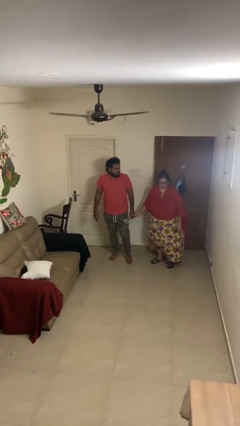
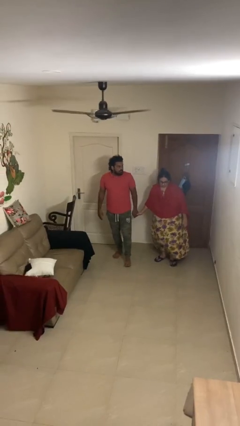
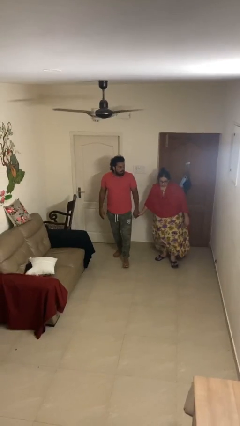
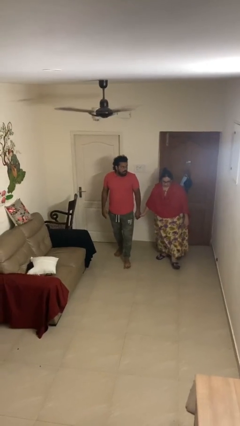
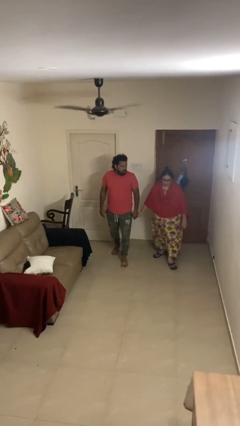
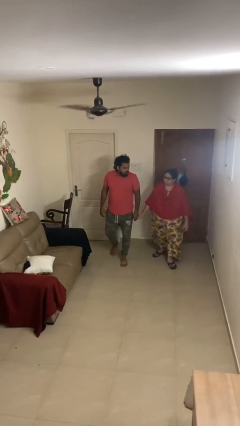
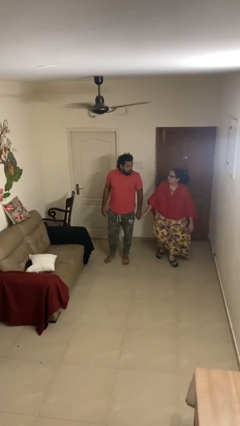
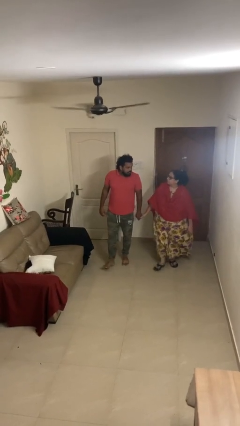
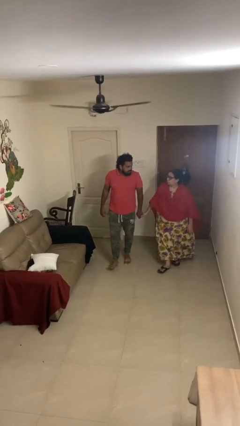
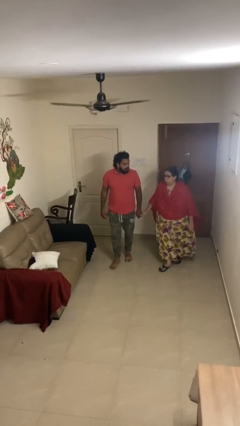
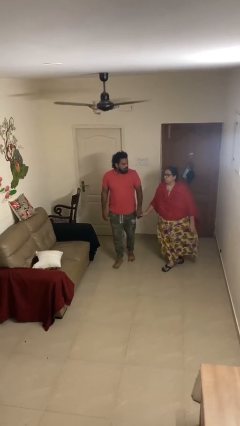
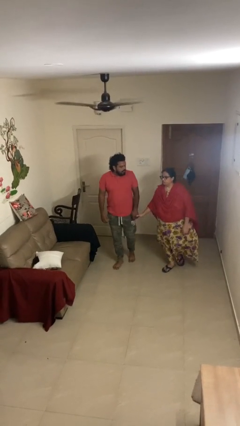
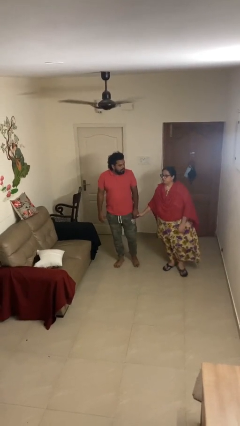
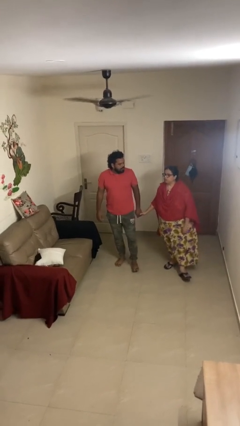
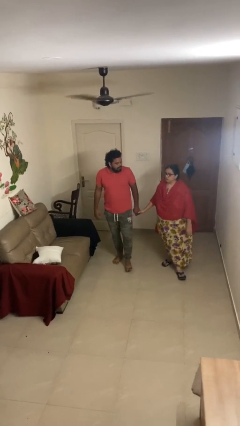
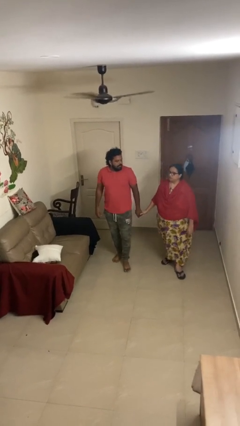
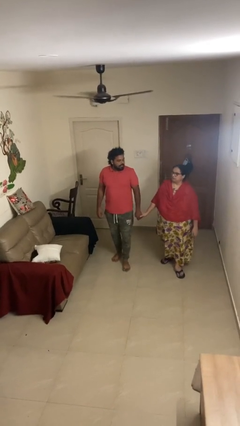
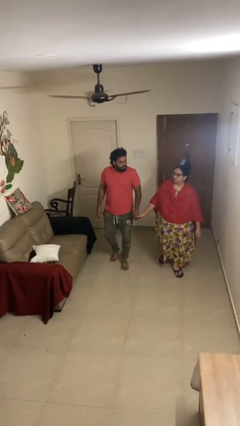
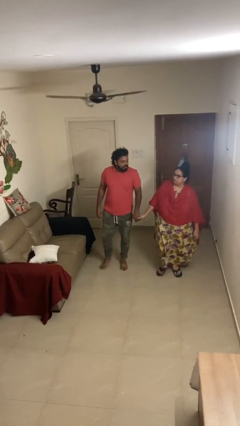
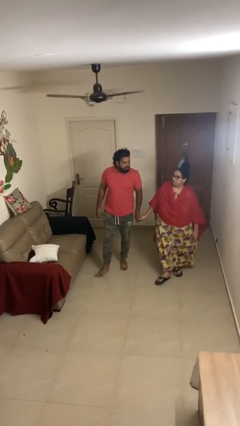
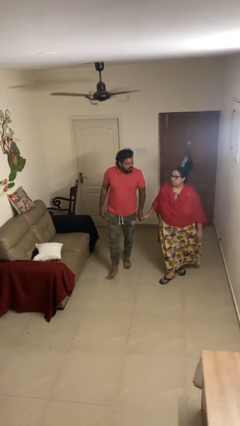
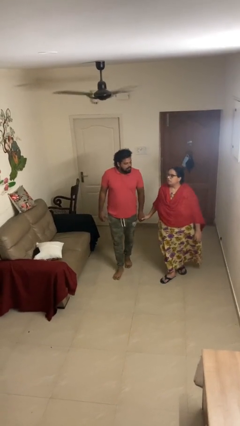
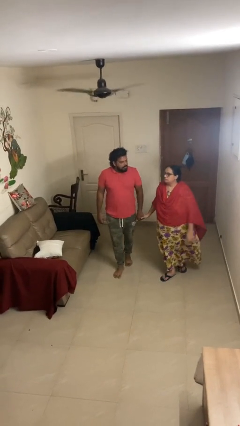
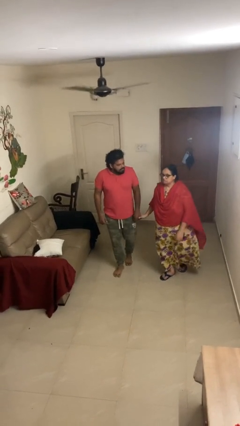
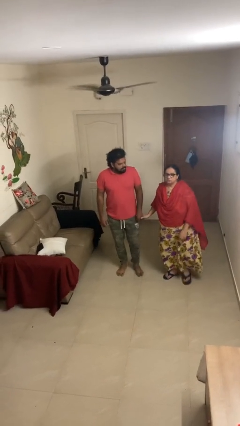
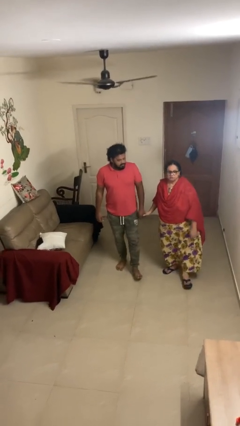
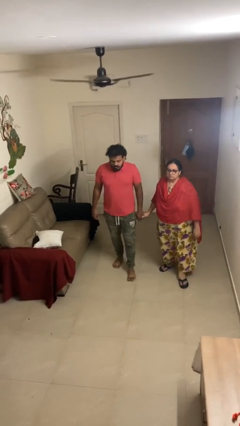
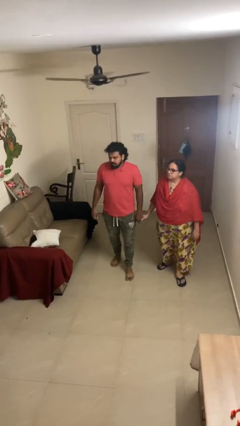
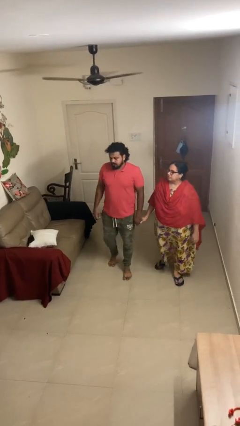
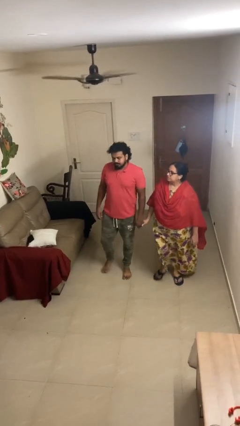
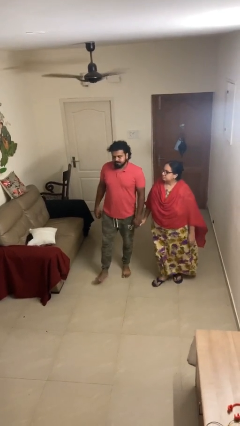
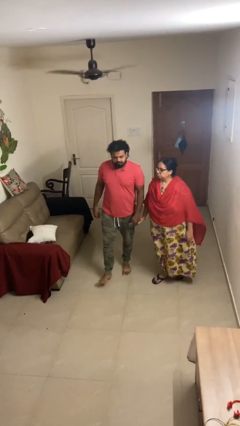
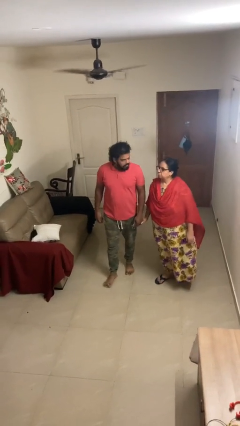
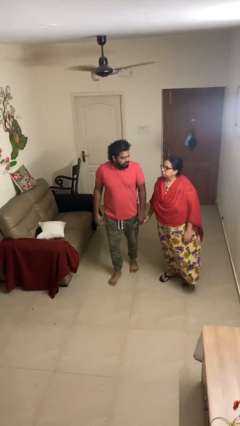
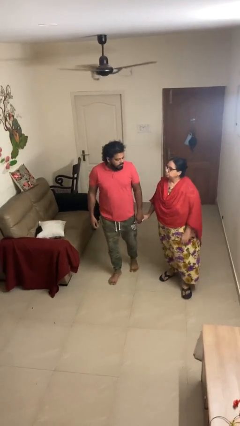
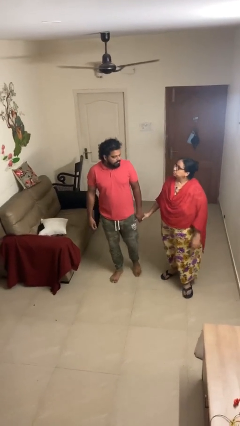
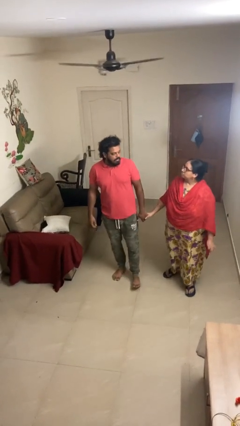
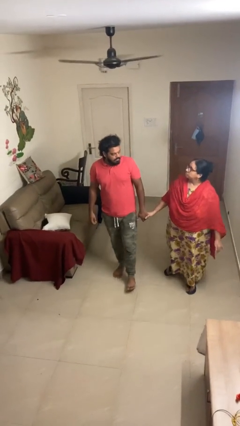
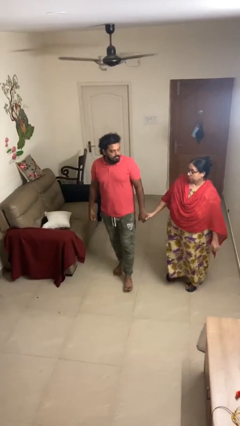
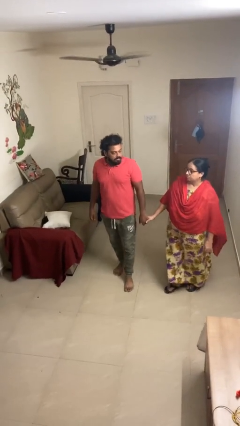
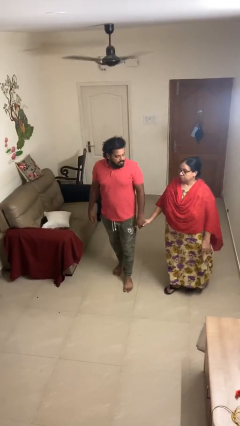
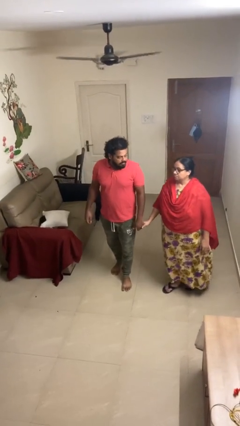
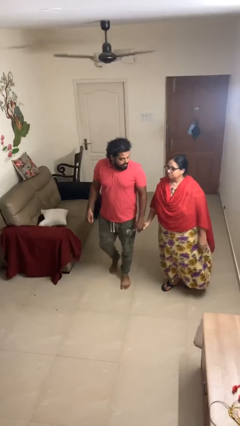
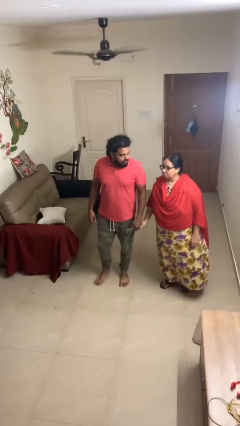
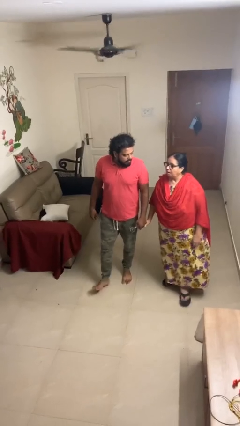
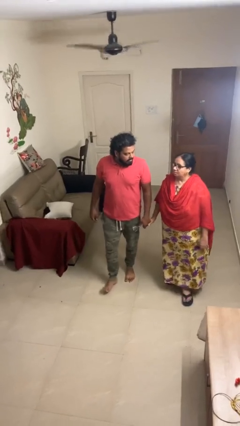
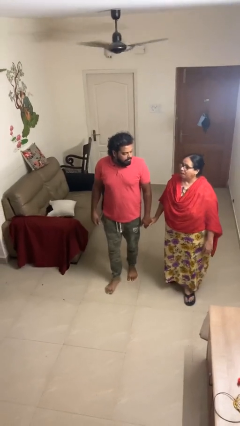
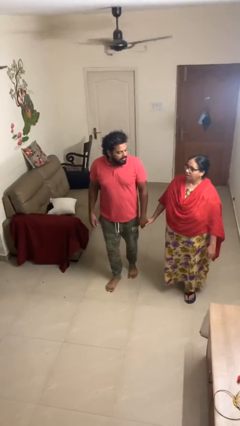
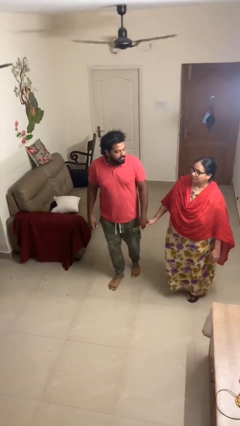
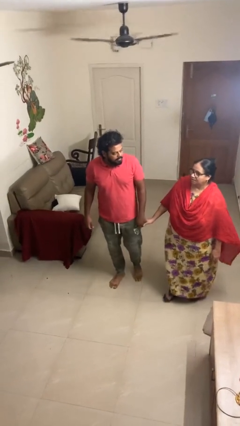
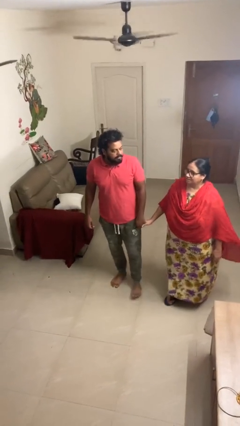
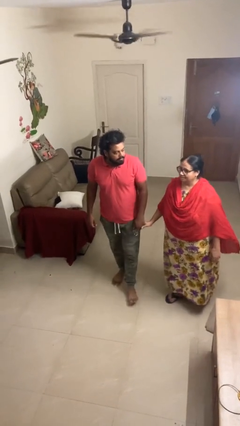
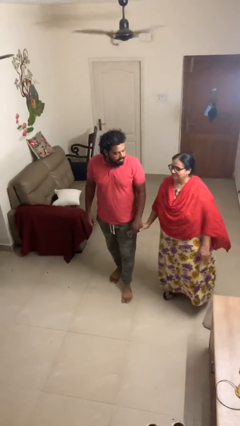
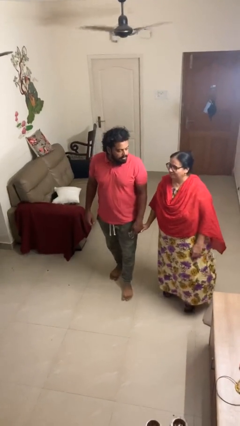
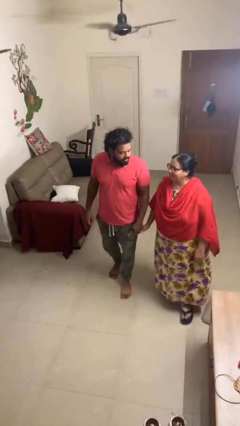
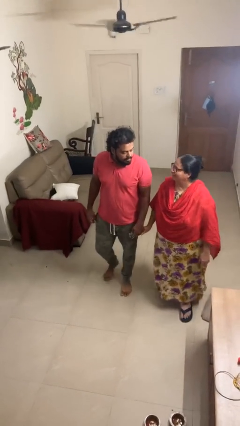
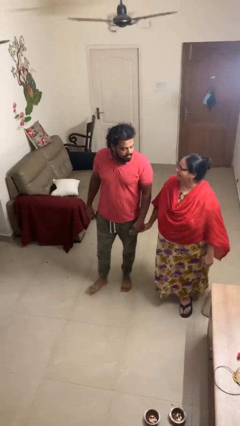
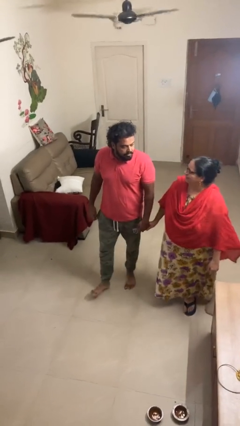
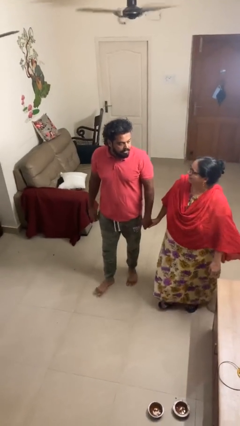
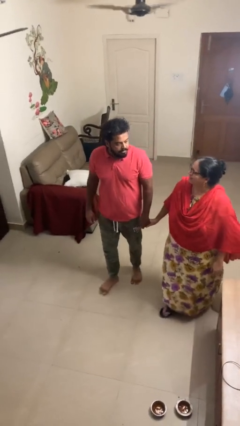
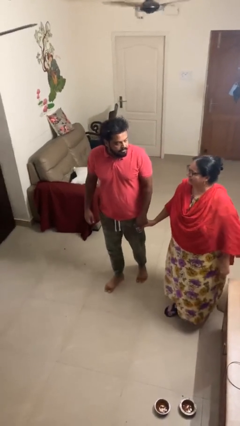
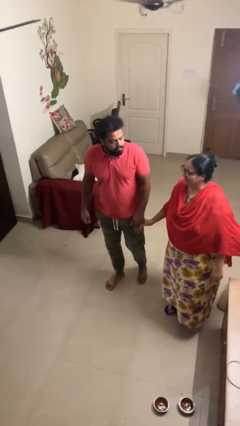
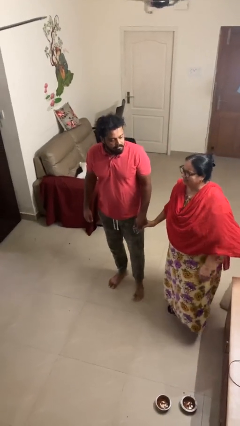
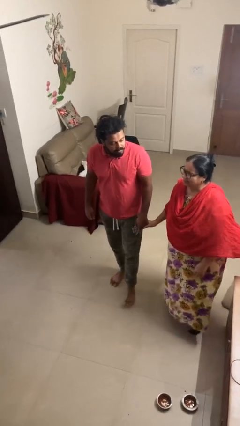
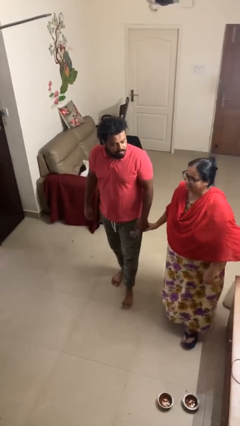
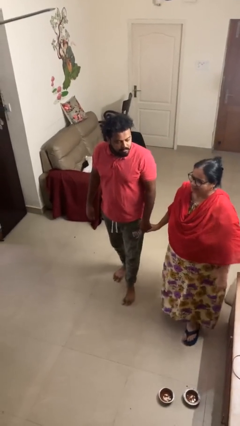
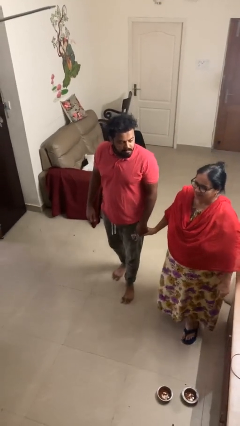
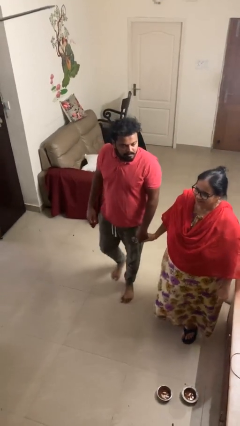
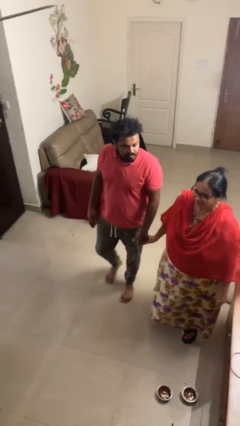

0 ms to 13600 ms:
person holds hand

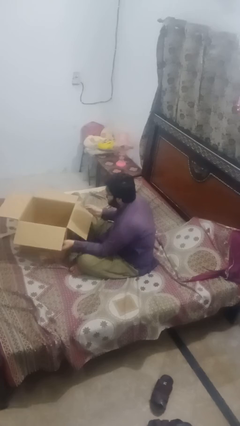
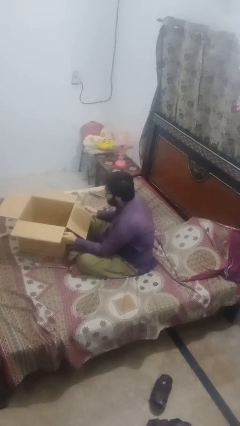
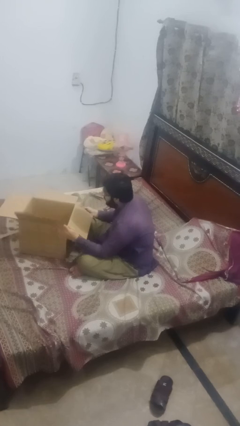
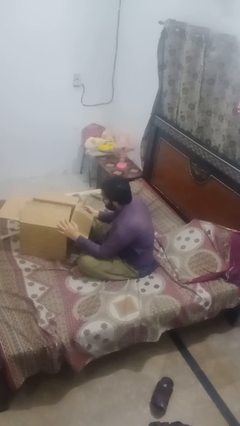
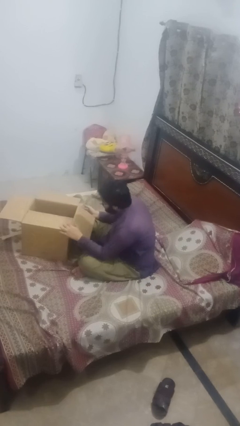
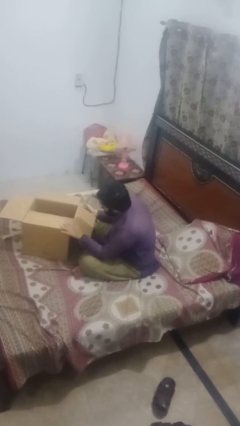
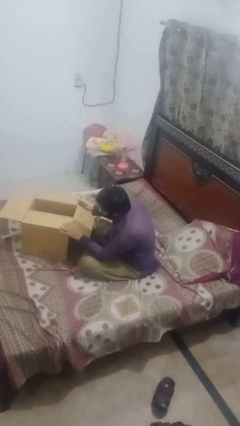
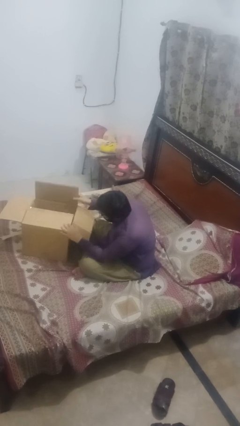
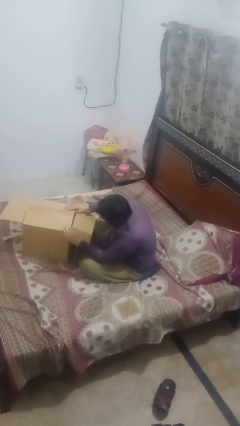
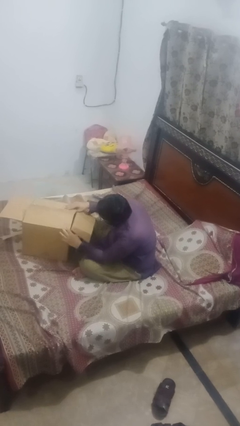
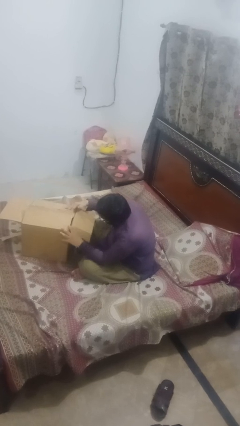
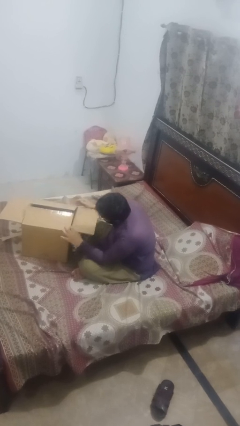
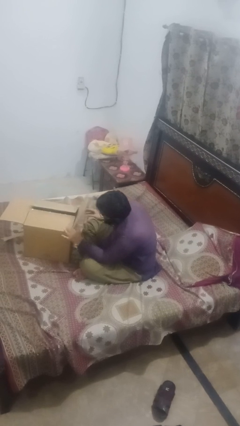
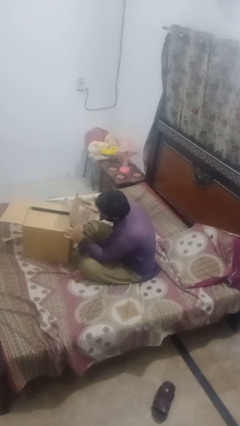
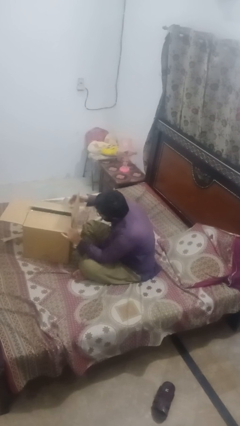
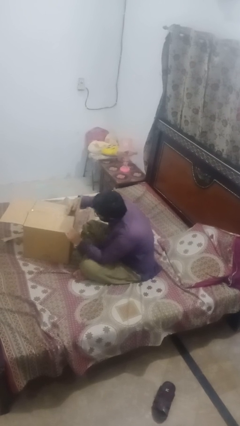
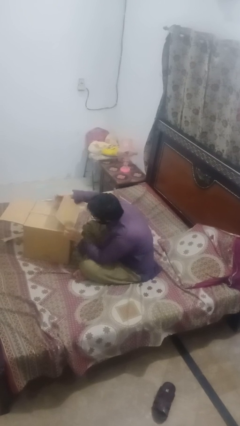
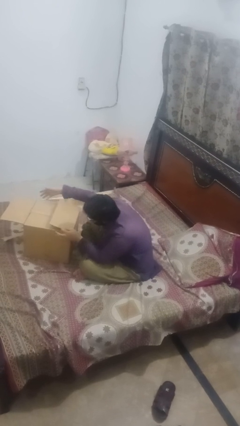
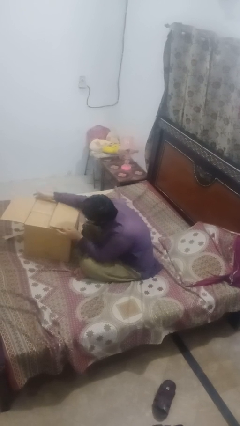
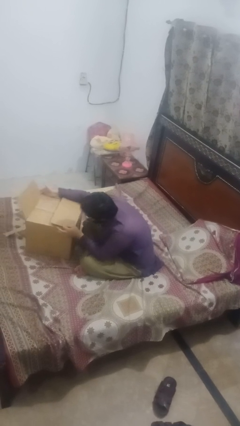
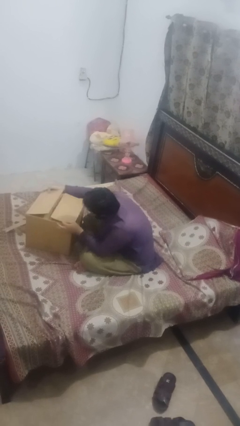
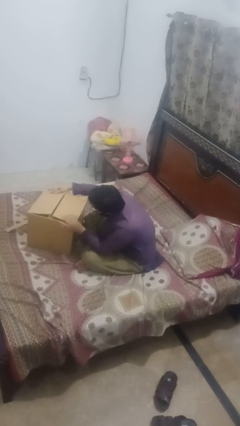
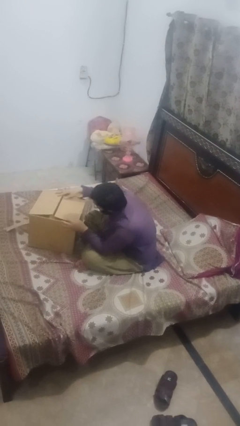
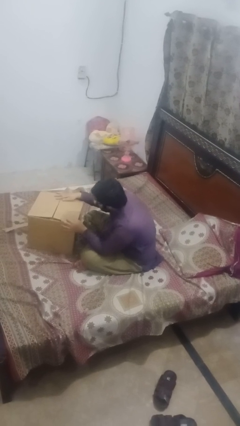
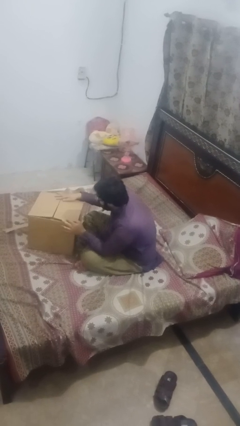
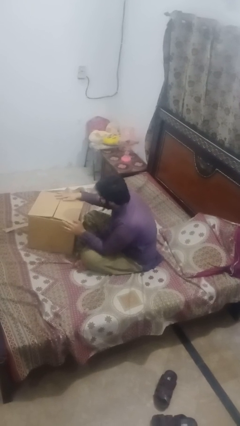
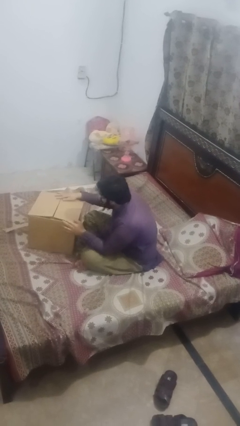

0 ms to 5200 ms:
person closes box
